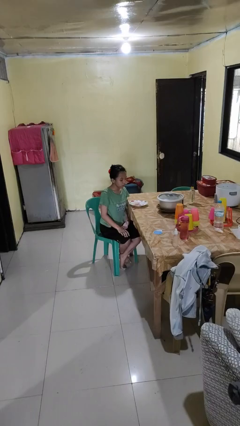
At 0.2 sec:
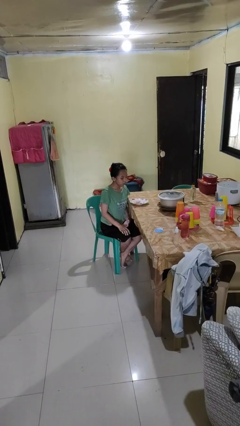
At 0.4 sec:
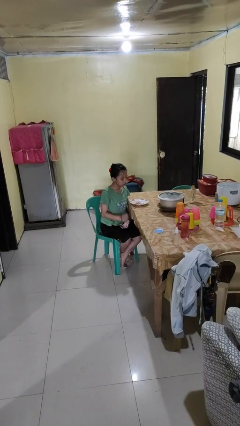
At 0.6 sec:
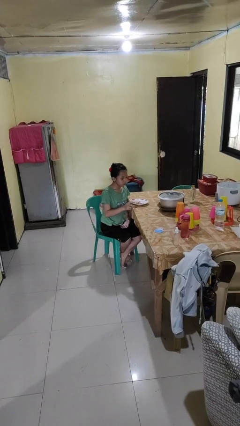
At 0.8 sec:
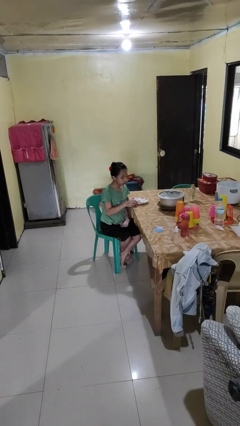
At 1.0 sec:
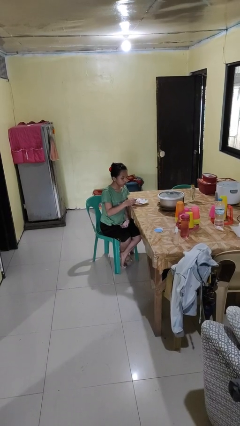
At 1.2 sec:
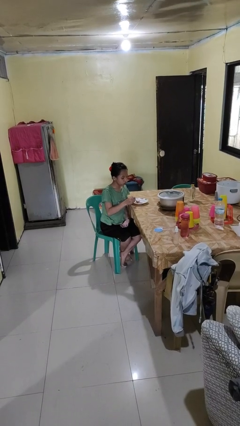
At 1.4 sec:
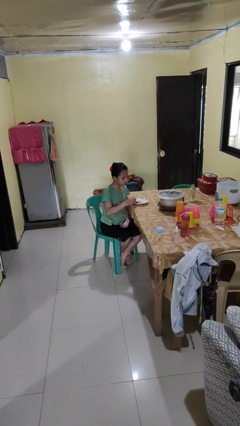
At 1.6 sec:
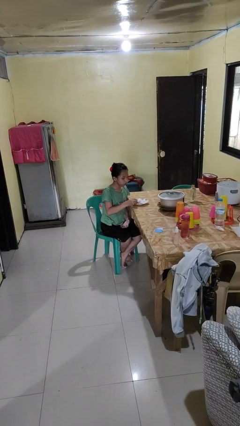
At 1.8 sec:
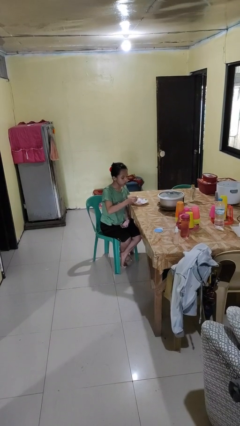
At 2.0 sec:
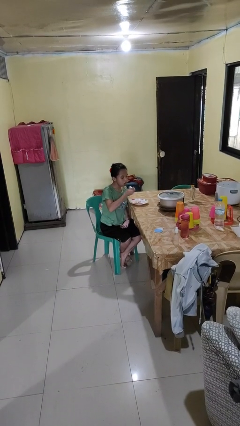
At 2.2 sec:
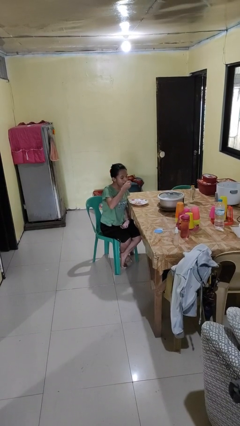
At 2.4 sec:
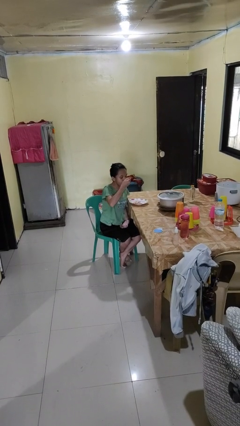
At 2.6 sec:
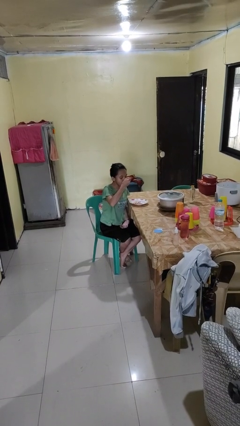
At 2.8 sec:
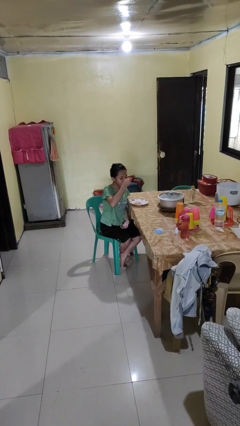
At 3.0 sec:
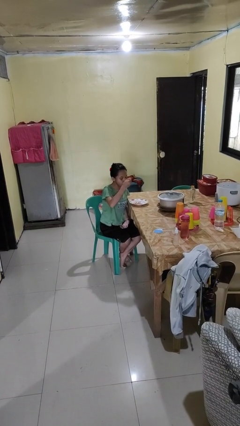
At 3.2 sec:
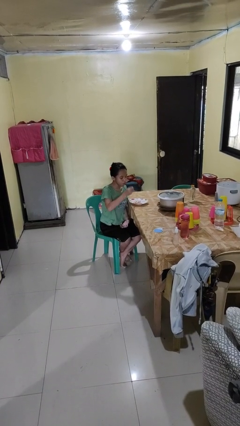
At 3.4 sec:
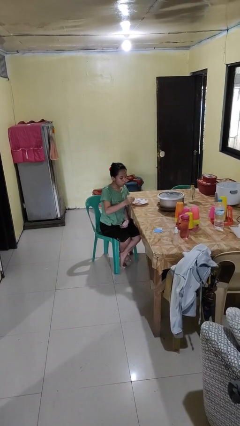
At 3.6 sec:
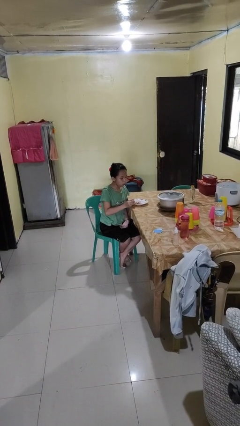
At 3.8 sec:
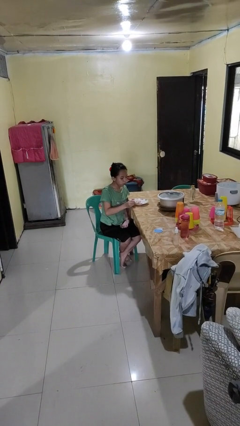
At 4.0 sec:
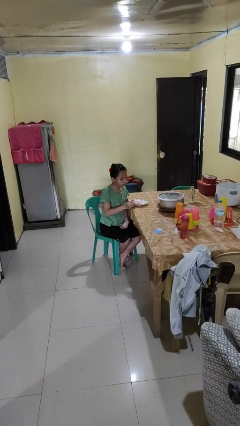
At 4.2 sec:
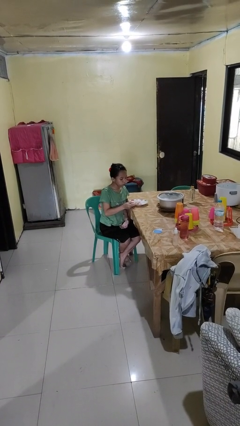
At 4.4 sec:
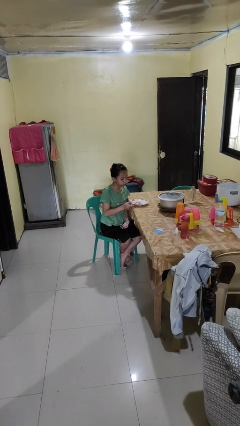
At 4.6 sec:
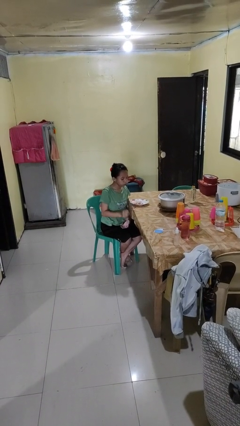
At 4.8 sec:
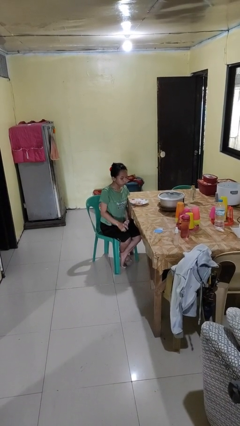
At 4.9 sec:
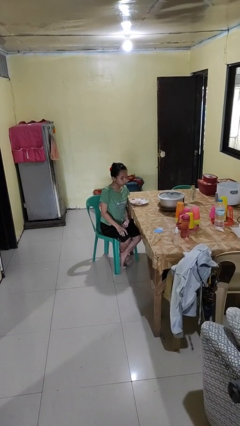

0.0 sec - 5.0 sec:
person eats with utensil

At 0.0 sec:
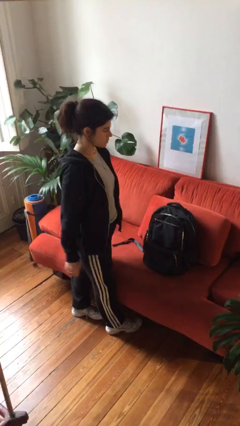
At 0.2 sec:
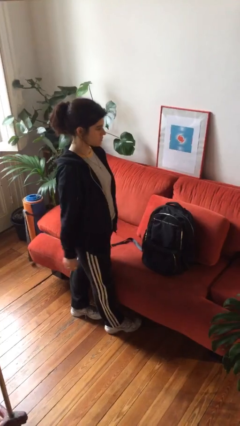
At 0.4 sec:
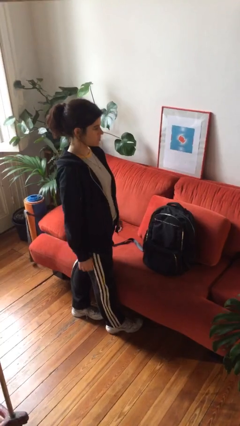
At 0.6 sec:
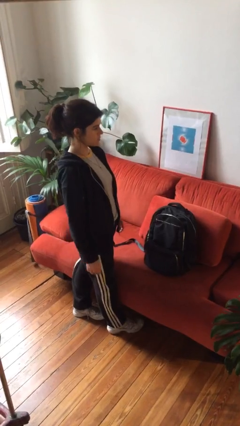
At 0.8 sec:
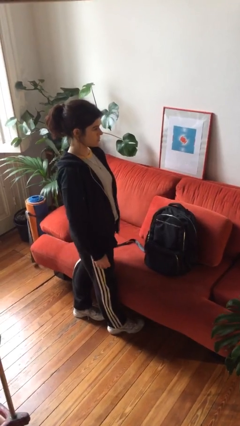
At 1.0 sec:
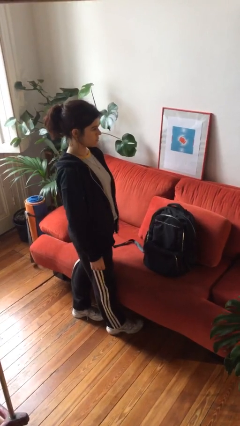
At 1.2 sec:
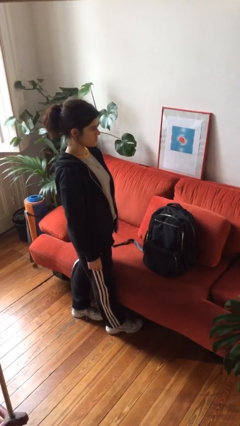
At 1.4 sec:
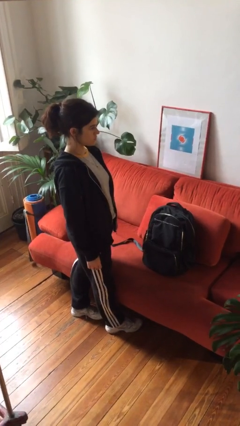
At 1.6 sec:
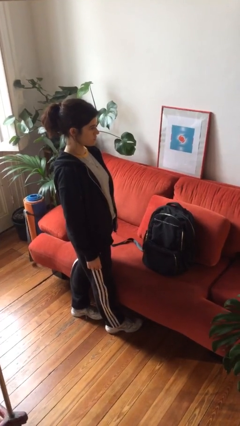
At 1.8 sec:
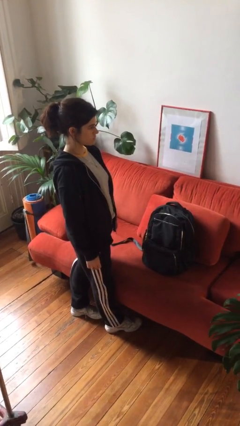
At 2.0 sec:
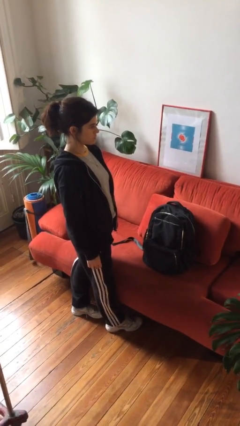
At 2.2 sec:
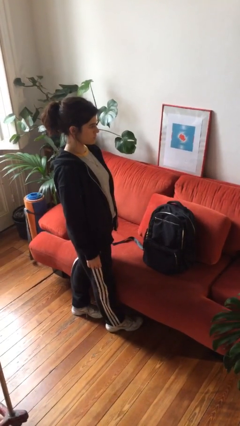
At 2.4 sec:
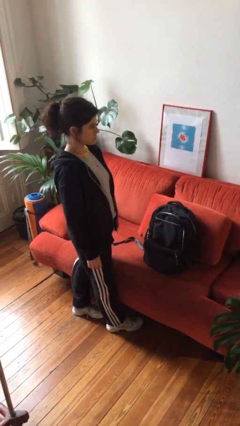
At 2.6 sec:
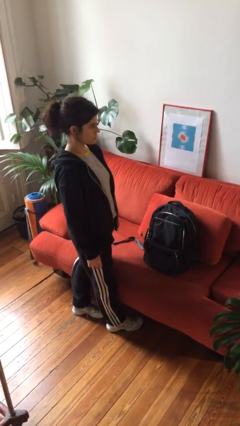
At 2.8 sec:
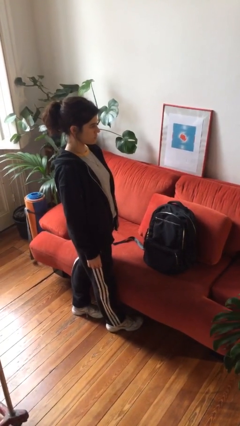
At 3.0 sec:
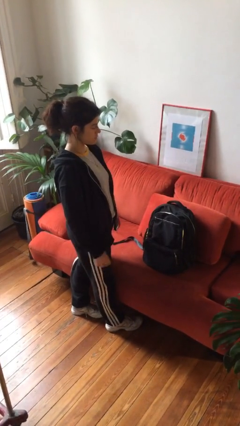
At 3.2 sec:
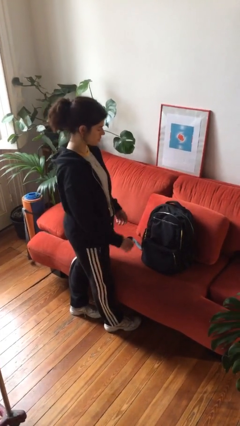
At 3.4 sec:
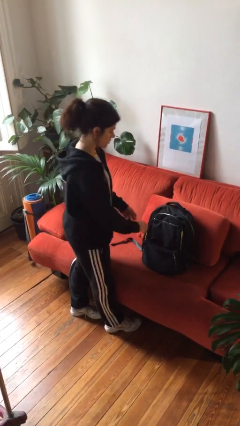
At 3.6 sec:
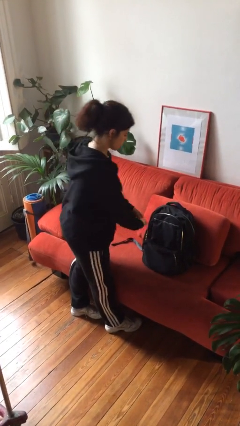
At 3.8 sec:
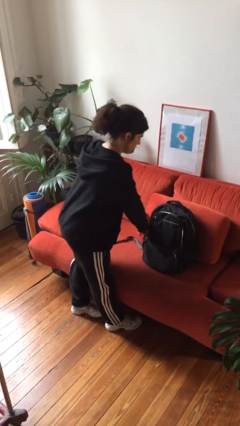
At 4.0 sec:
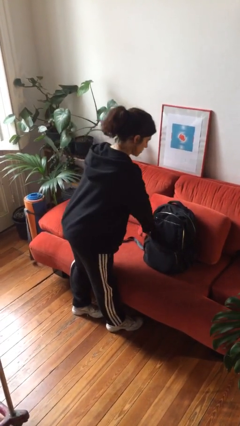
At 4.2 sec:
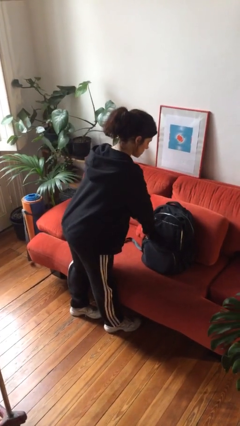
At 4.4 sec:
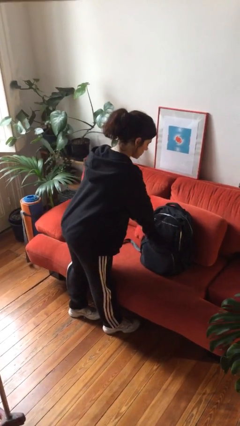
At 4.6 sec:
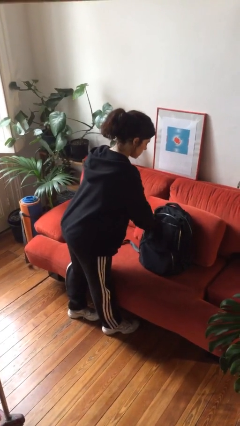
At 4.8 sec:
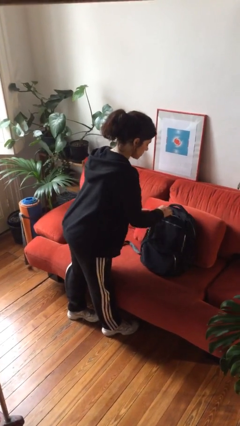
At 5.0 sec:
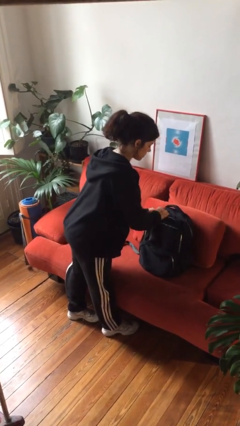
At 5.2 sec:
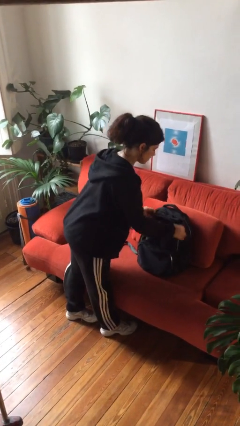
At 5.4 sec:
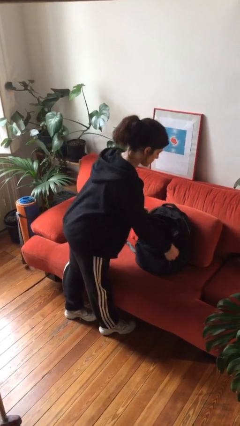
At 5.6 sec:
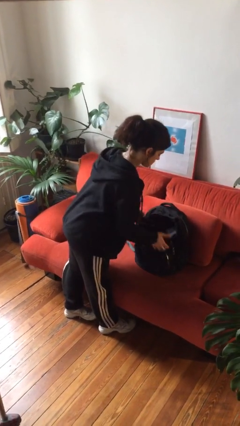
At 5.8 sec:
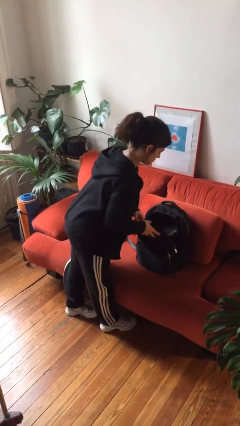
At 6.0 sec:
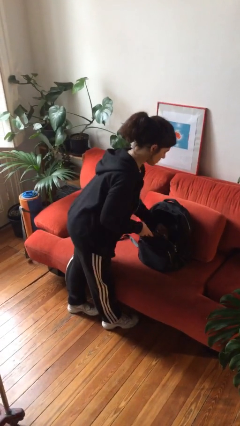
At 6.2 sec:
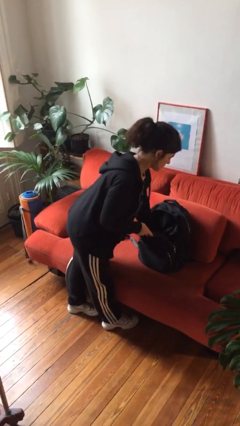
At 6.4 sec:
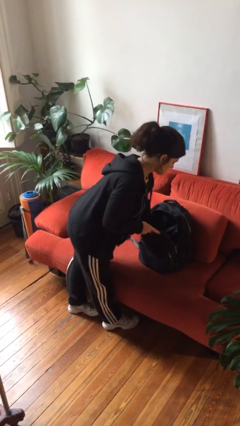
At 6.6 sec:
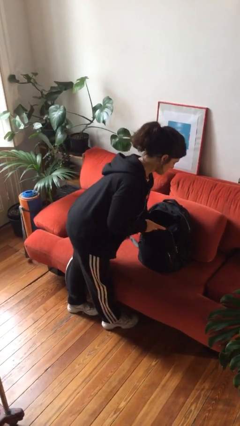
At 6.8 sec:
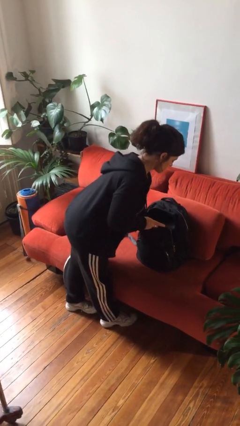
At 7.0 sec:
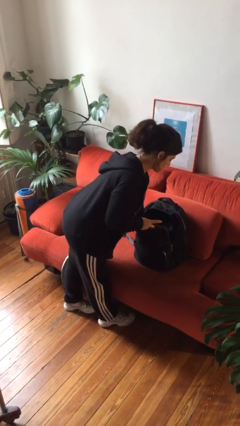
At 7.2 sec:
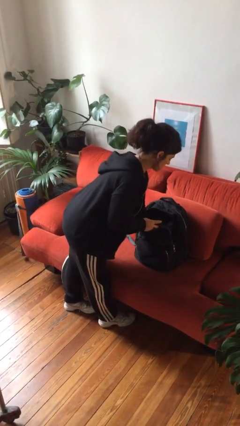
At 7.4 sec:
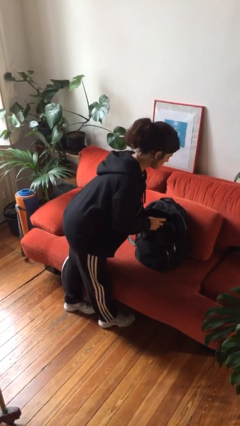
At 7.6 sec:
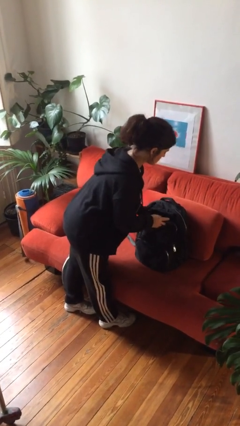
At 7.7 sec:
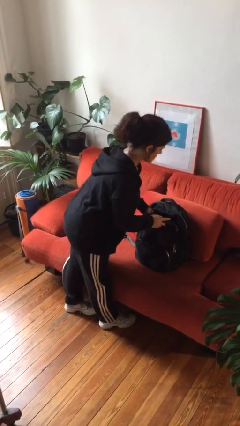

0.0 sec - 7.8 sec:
person searches in backpack

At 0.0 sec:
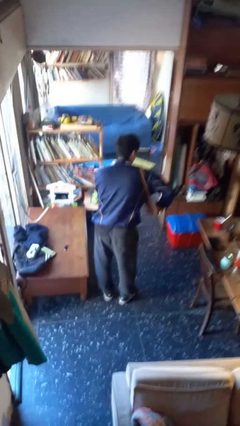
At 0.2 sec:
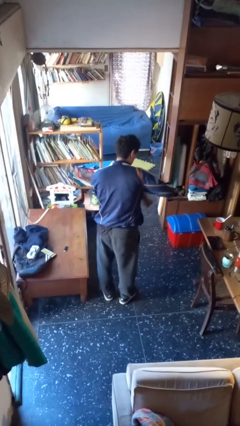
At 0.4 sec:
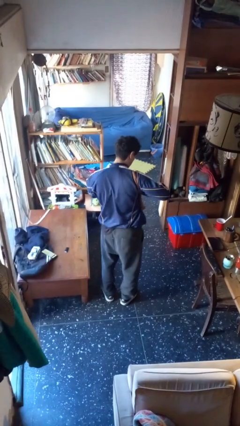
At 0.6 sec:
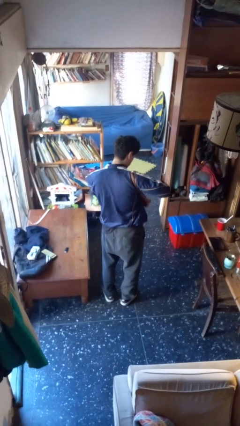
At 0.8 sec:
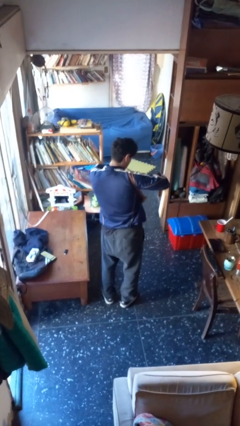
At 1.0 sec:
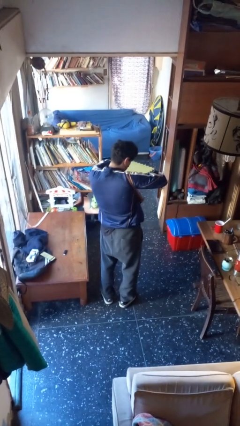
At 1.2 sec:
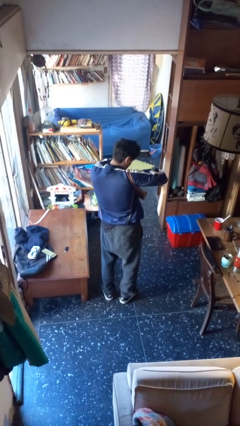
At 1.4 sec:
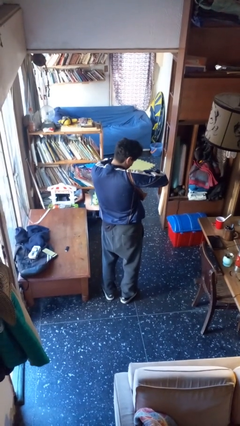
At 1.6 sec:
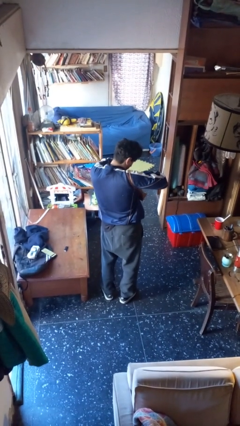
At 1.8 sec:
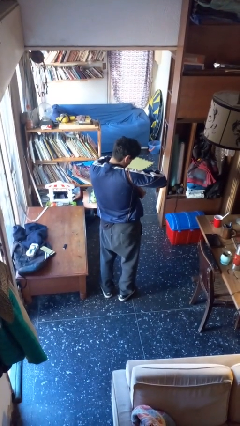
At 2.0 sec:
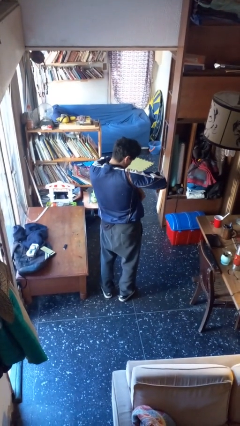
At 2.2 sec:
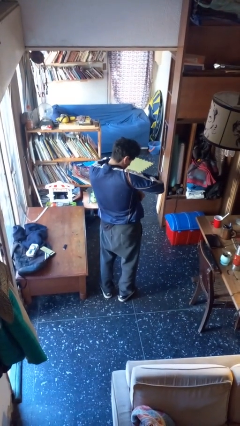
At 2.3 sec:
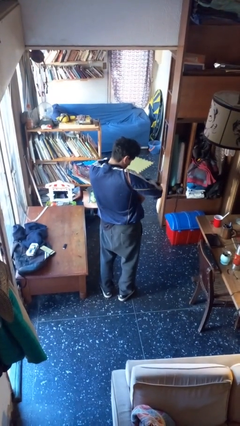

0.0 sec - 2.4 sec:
person searches in purse

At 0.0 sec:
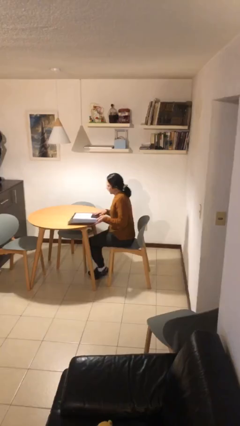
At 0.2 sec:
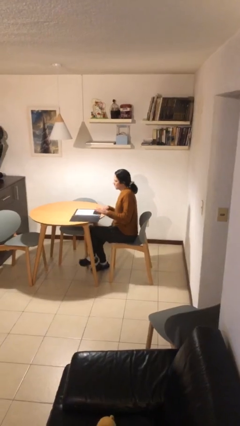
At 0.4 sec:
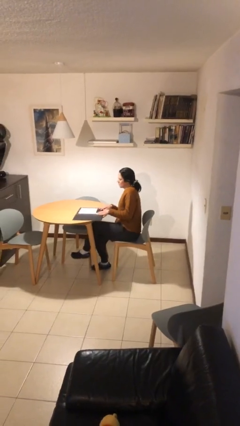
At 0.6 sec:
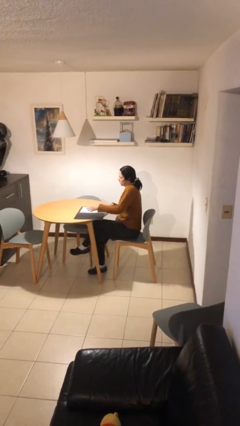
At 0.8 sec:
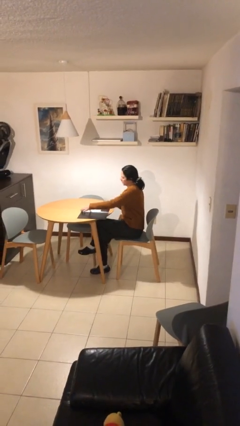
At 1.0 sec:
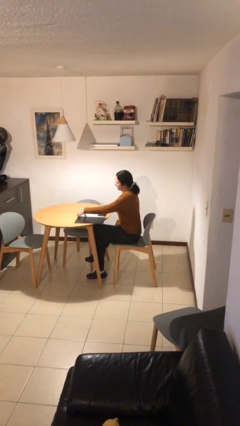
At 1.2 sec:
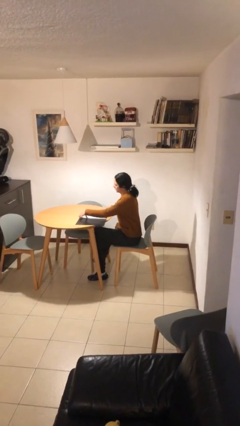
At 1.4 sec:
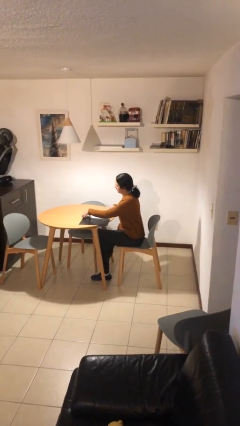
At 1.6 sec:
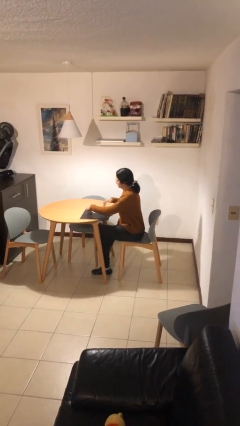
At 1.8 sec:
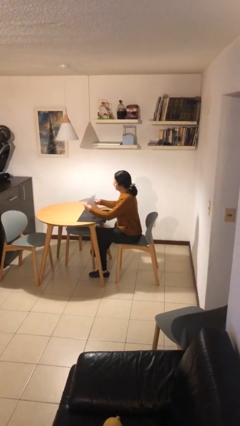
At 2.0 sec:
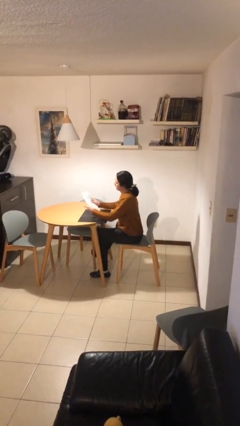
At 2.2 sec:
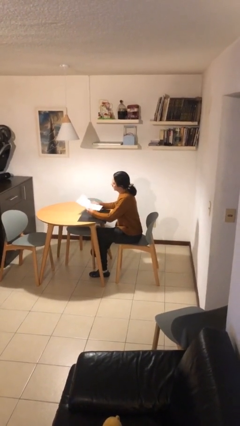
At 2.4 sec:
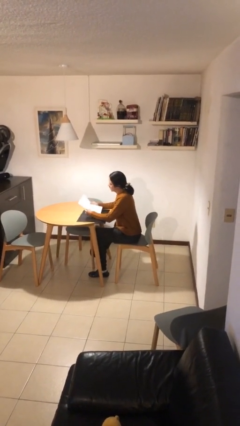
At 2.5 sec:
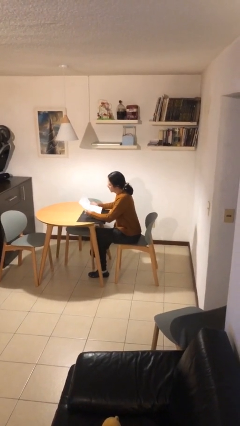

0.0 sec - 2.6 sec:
person sits down
